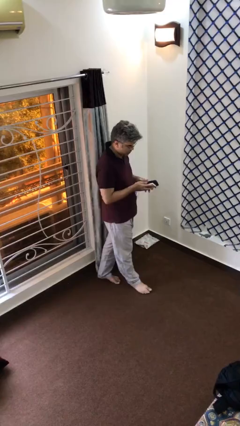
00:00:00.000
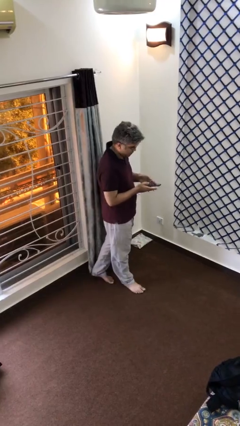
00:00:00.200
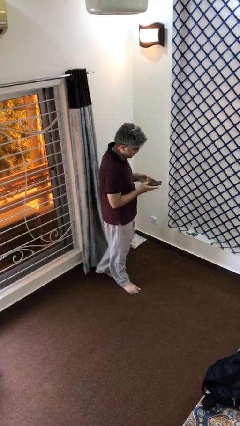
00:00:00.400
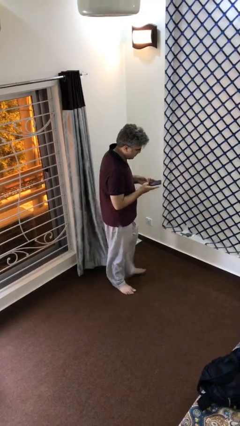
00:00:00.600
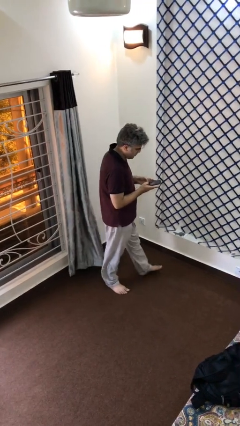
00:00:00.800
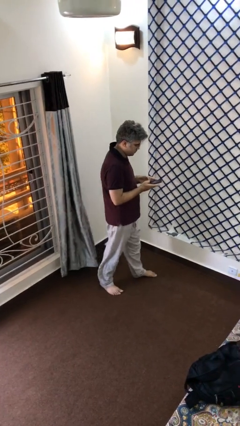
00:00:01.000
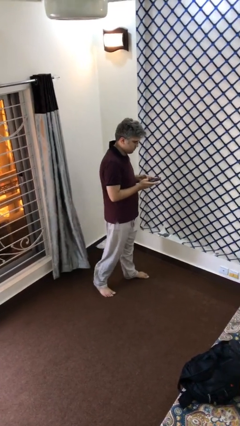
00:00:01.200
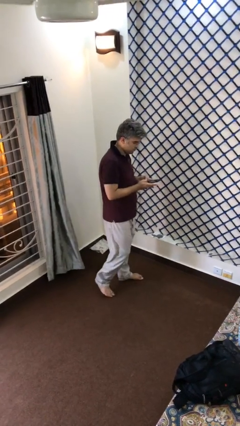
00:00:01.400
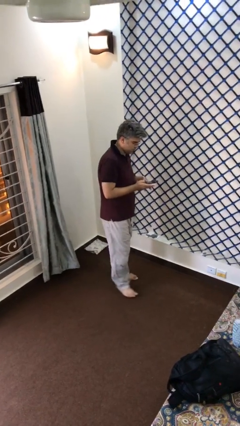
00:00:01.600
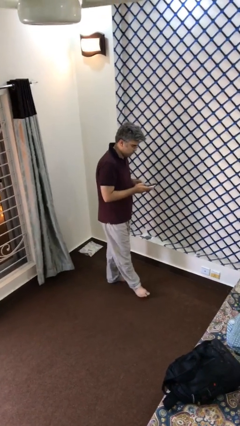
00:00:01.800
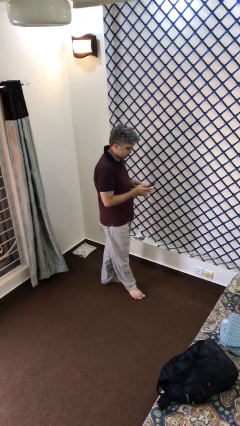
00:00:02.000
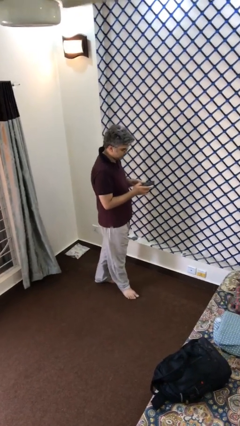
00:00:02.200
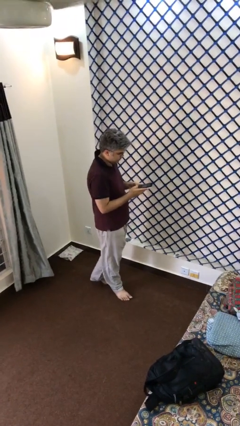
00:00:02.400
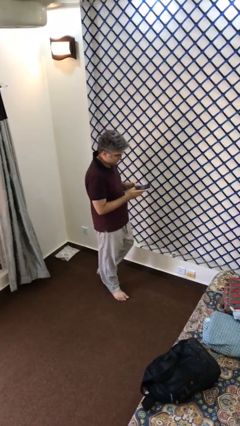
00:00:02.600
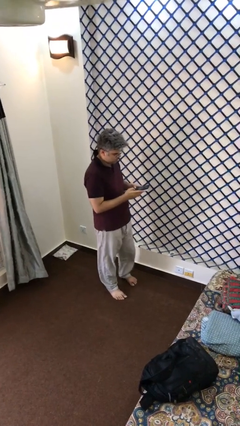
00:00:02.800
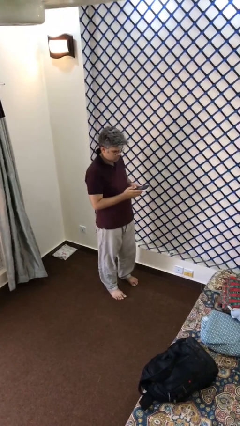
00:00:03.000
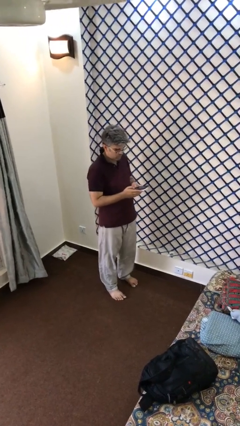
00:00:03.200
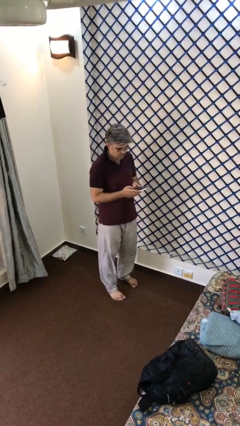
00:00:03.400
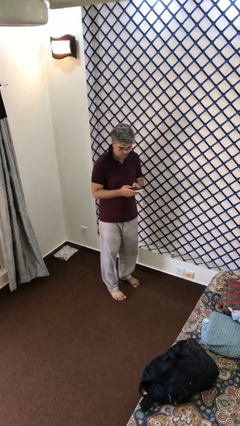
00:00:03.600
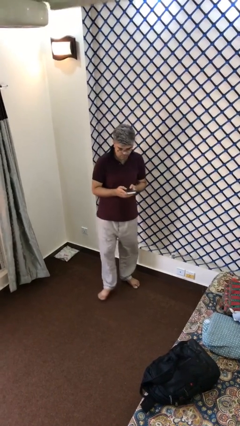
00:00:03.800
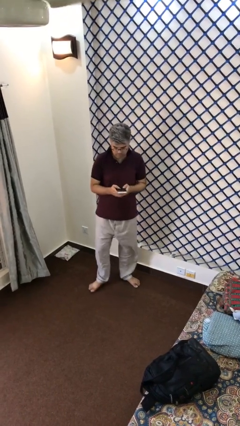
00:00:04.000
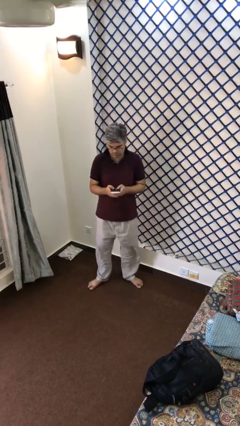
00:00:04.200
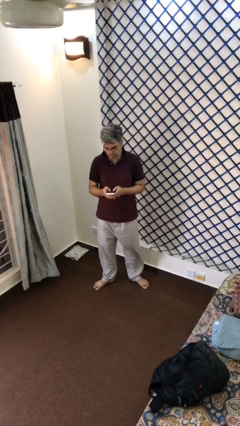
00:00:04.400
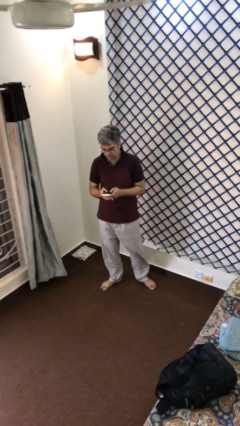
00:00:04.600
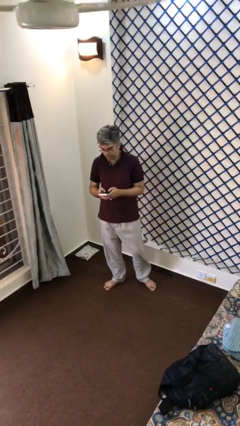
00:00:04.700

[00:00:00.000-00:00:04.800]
person texts on phone

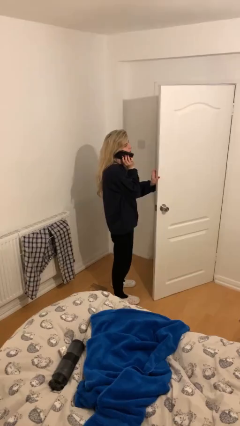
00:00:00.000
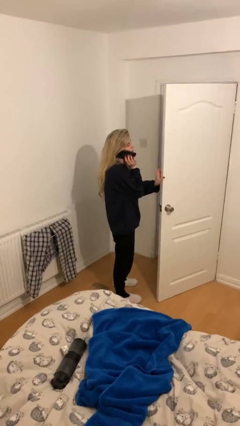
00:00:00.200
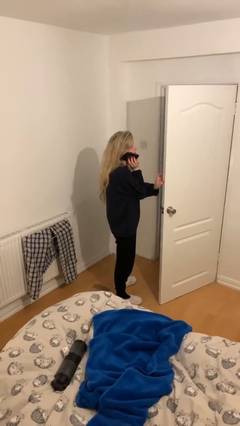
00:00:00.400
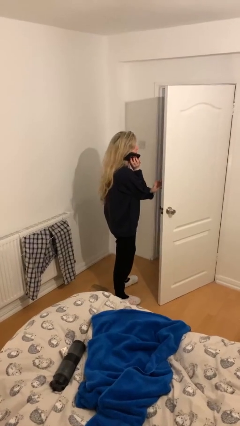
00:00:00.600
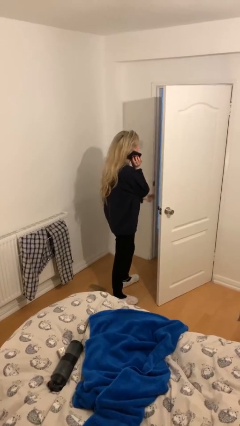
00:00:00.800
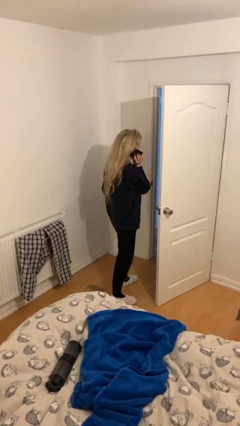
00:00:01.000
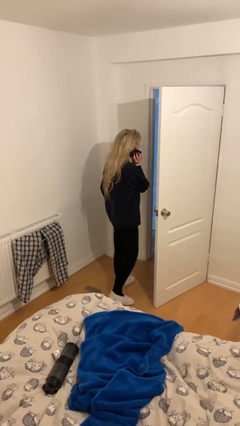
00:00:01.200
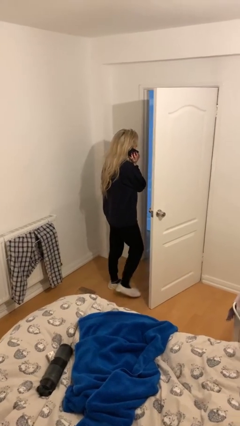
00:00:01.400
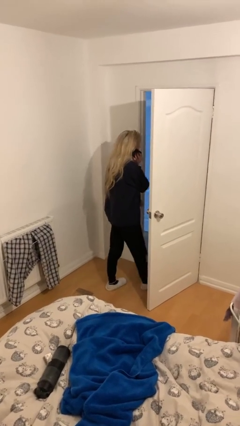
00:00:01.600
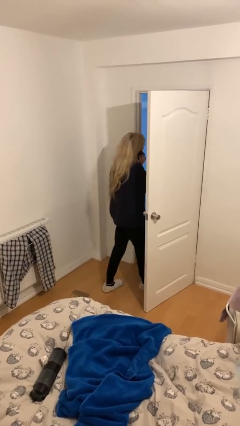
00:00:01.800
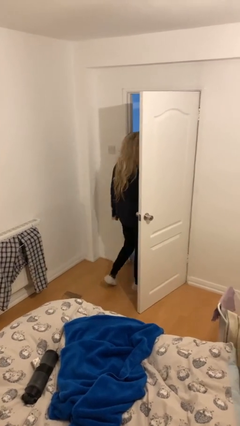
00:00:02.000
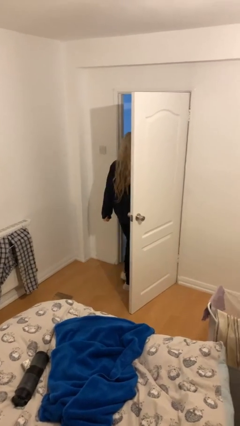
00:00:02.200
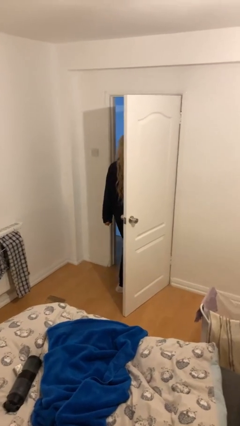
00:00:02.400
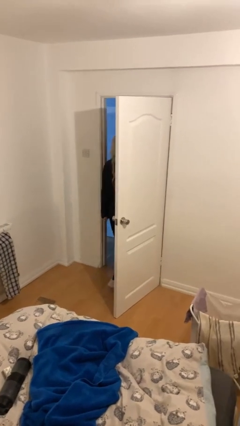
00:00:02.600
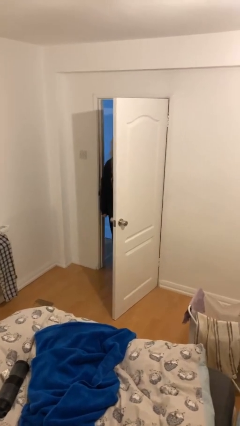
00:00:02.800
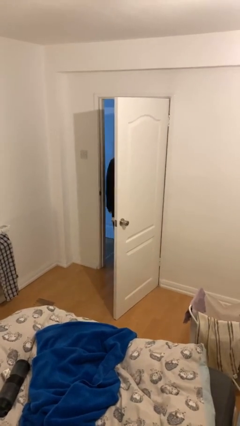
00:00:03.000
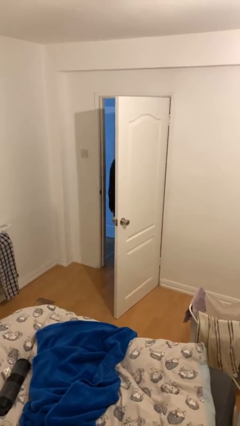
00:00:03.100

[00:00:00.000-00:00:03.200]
person exits scene through structure

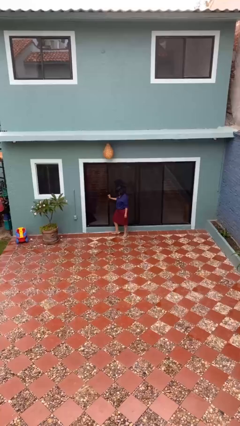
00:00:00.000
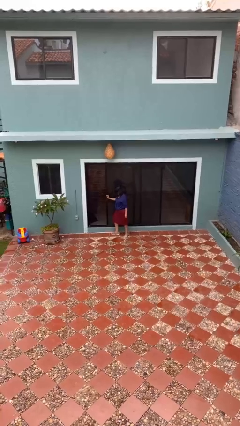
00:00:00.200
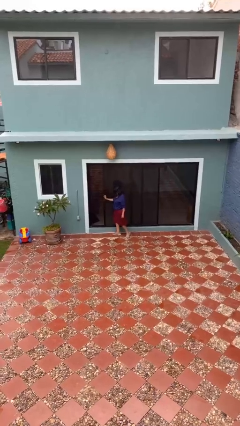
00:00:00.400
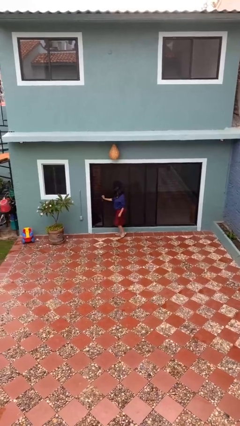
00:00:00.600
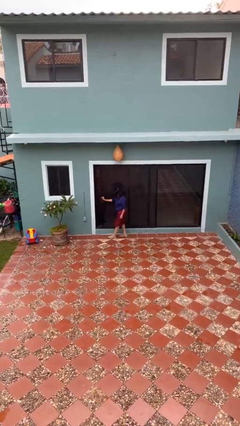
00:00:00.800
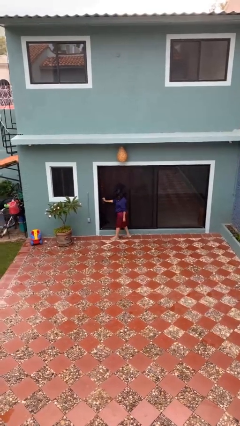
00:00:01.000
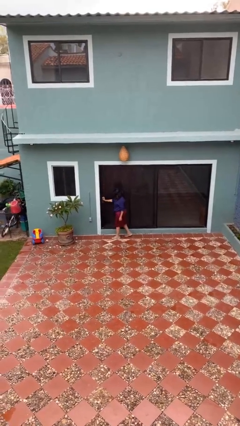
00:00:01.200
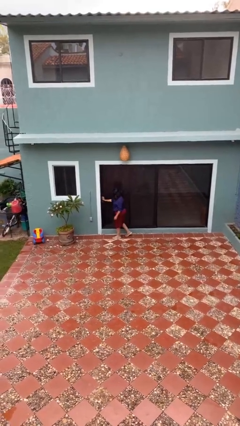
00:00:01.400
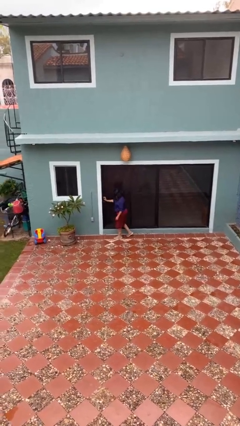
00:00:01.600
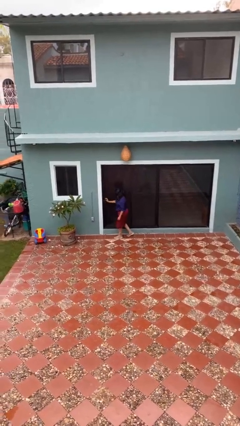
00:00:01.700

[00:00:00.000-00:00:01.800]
person closes sliding door

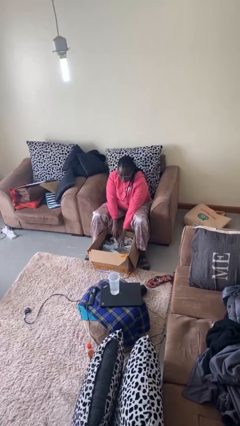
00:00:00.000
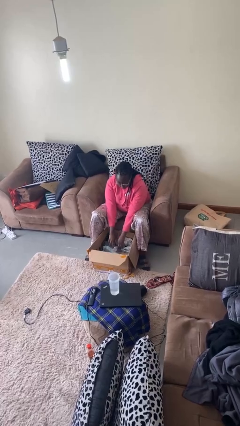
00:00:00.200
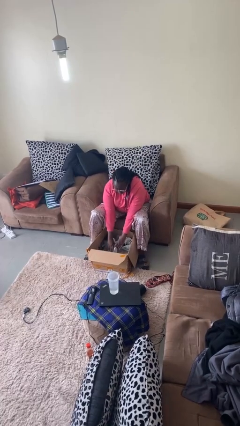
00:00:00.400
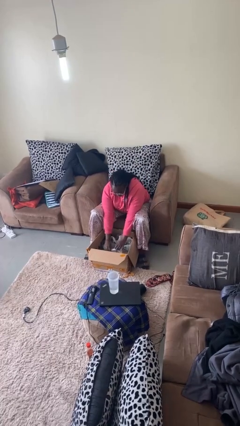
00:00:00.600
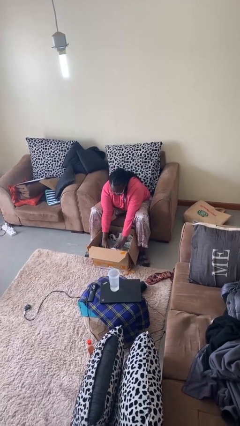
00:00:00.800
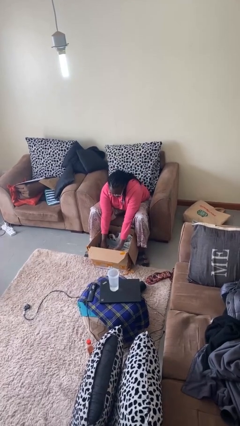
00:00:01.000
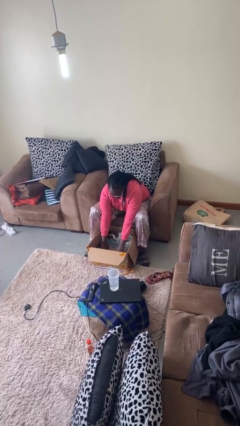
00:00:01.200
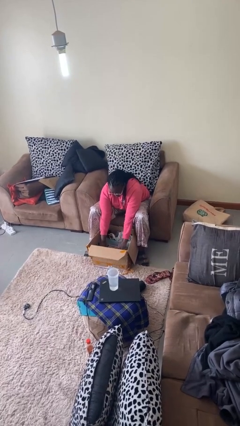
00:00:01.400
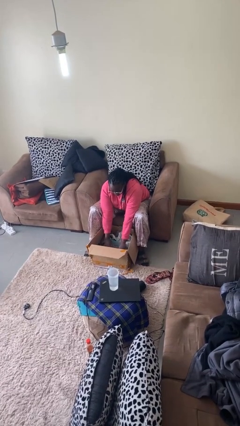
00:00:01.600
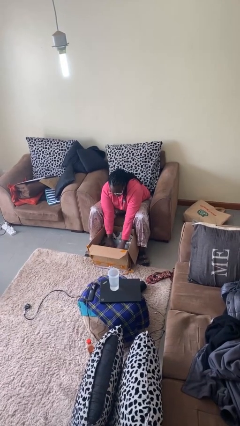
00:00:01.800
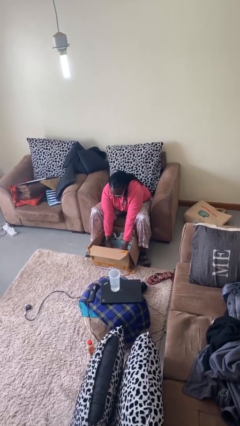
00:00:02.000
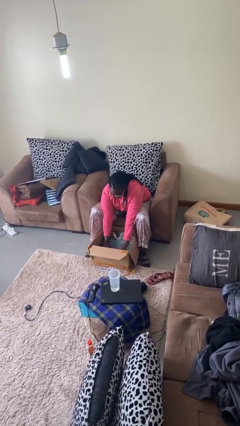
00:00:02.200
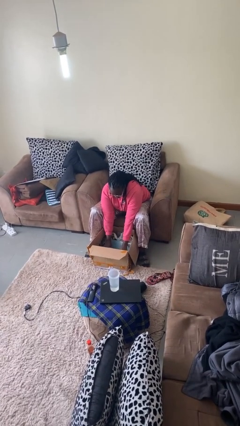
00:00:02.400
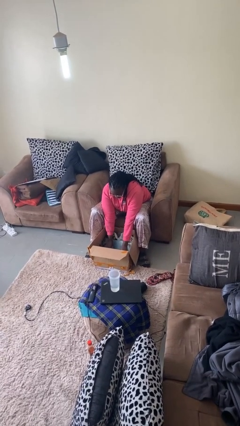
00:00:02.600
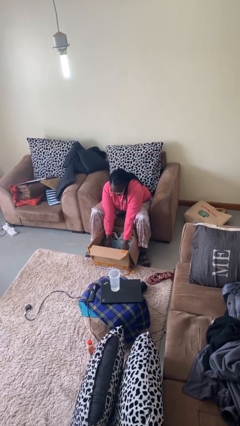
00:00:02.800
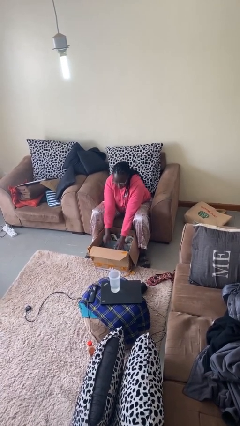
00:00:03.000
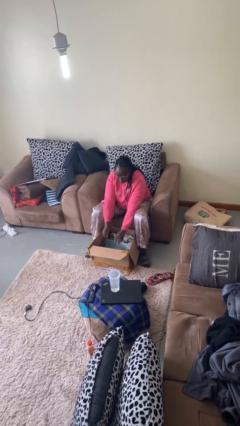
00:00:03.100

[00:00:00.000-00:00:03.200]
person searches in box

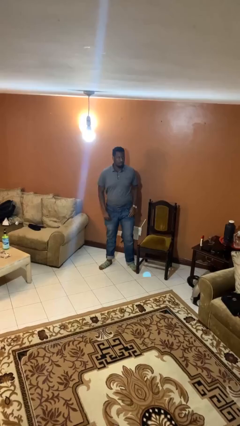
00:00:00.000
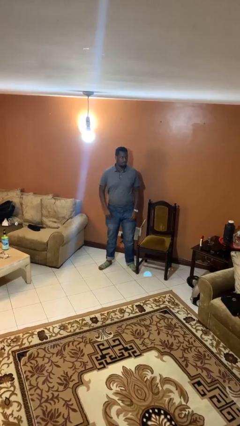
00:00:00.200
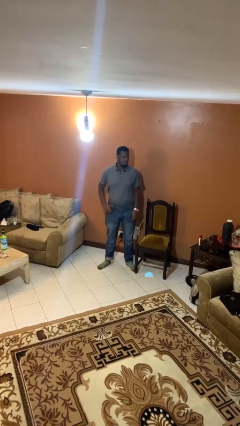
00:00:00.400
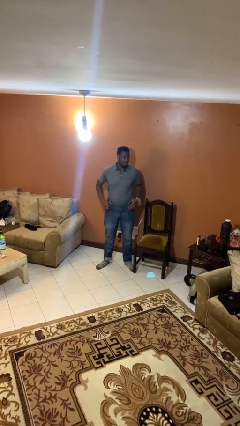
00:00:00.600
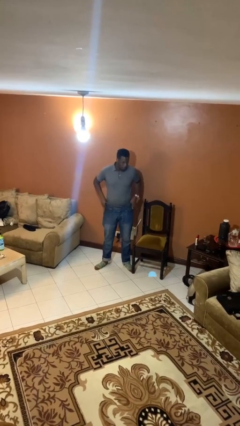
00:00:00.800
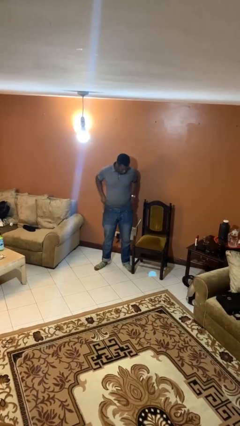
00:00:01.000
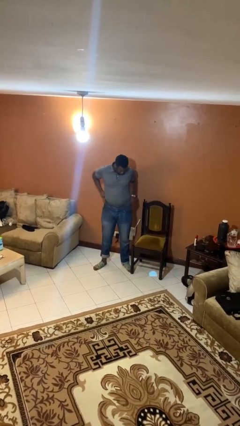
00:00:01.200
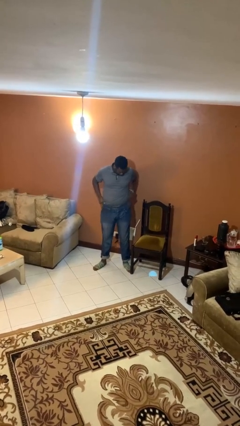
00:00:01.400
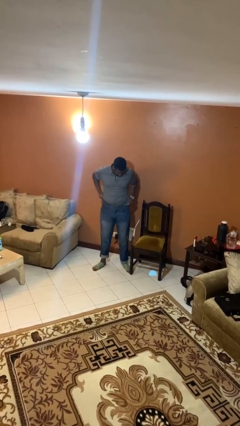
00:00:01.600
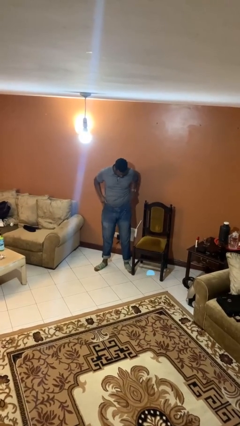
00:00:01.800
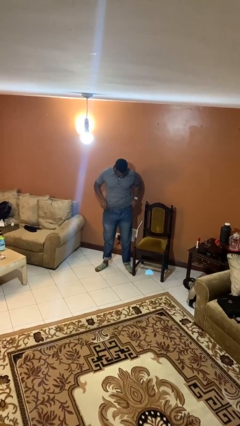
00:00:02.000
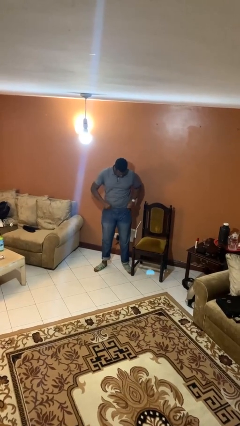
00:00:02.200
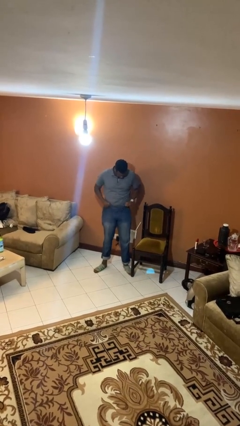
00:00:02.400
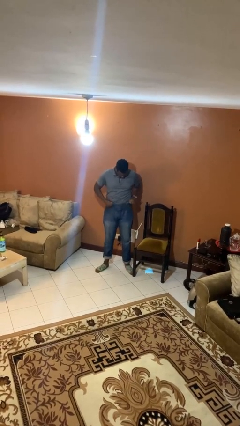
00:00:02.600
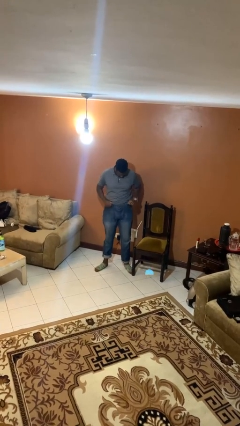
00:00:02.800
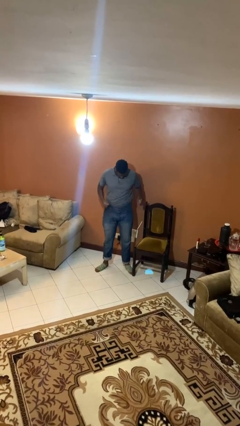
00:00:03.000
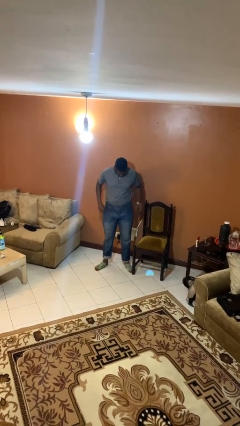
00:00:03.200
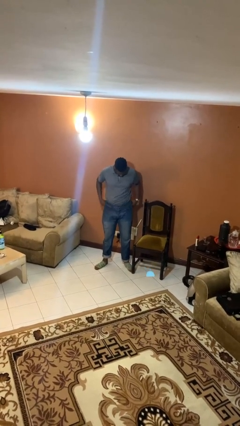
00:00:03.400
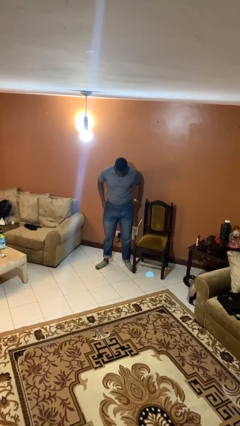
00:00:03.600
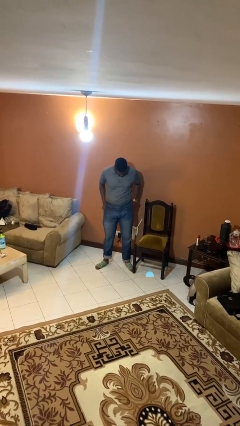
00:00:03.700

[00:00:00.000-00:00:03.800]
person hikes up pants

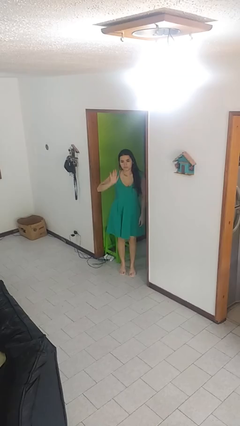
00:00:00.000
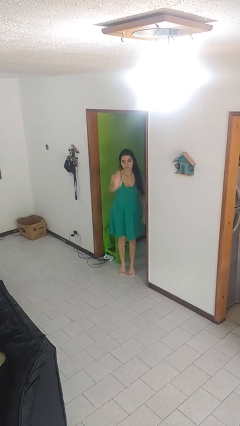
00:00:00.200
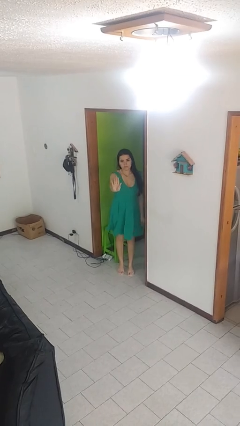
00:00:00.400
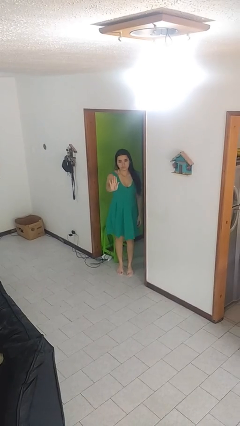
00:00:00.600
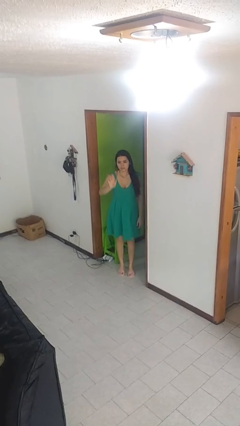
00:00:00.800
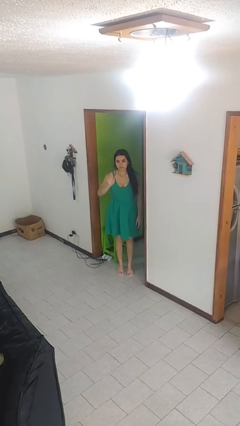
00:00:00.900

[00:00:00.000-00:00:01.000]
person gestures stop
